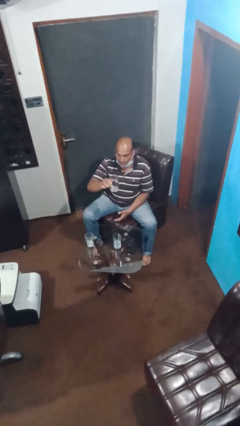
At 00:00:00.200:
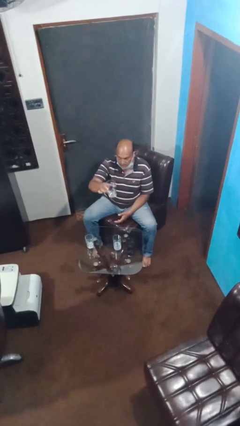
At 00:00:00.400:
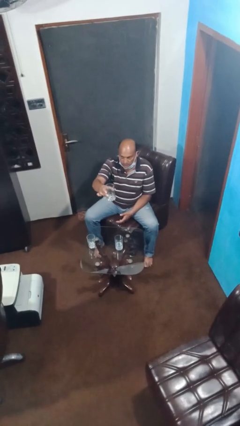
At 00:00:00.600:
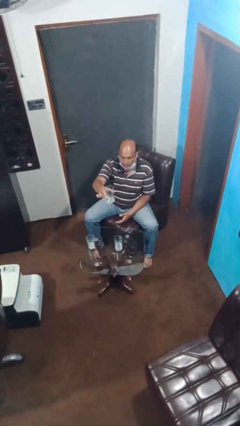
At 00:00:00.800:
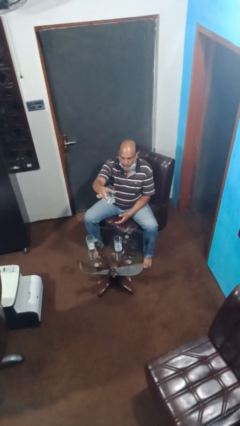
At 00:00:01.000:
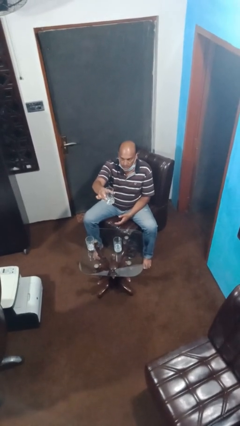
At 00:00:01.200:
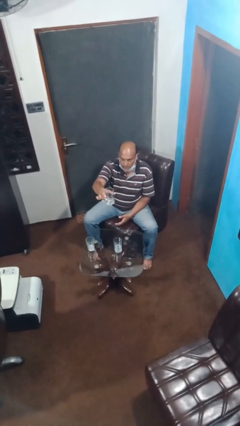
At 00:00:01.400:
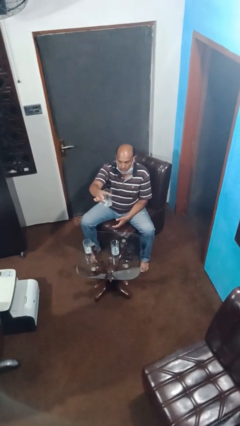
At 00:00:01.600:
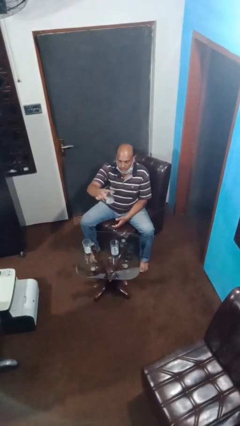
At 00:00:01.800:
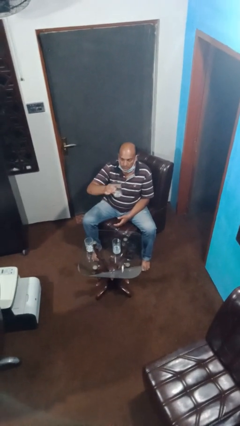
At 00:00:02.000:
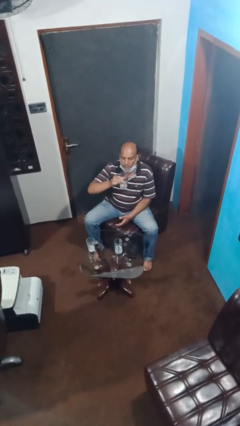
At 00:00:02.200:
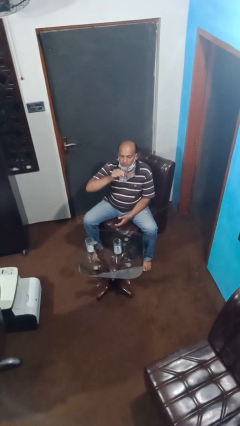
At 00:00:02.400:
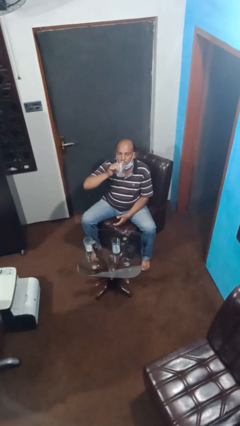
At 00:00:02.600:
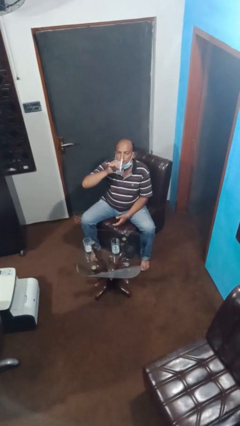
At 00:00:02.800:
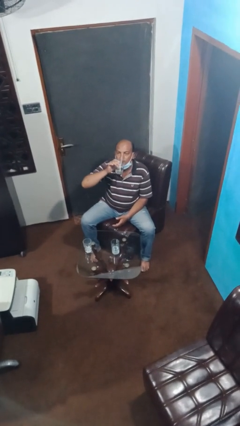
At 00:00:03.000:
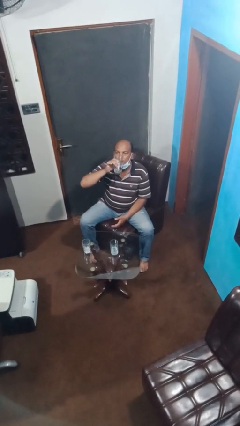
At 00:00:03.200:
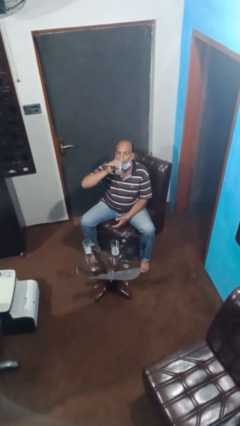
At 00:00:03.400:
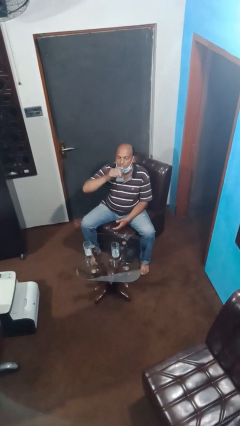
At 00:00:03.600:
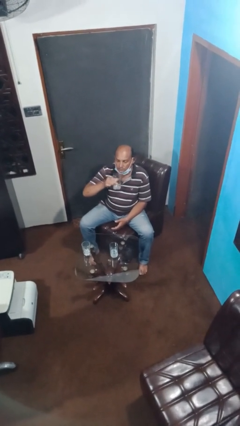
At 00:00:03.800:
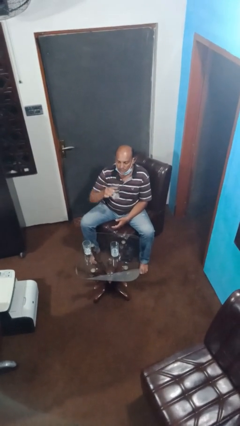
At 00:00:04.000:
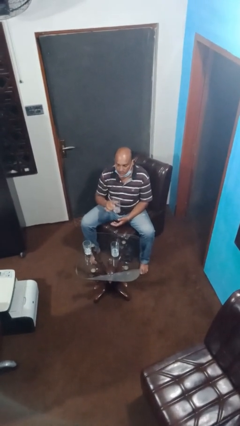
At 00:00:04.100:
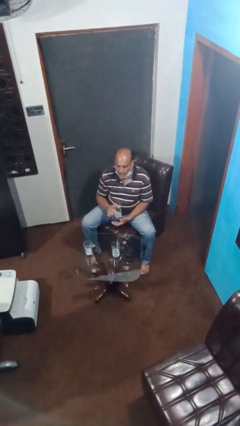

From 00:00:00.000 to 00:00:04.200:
person drinks from shotglass

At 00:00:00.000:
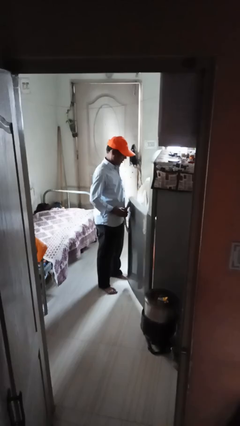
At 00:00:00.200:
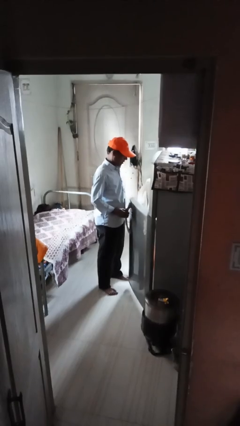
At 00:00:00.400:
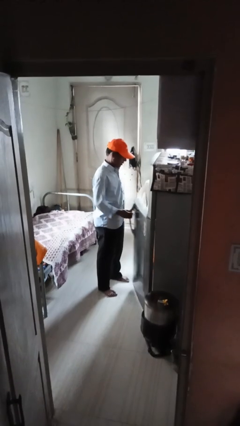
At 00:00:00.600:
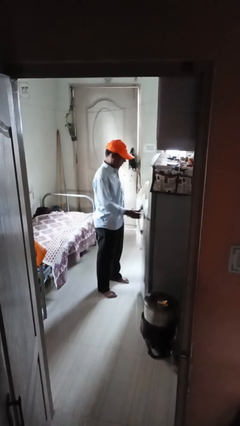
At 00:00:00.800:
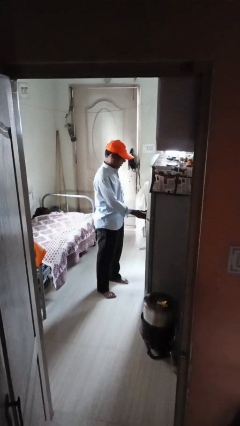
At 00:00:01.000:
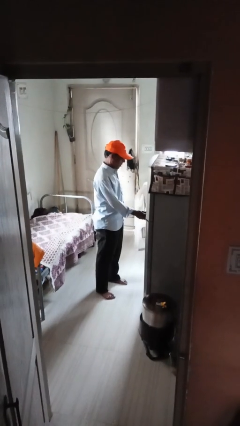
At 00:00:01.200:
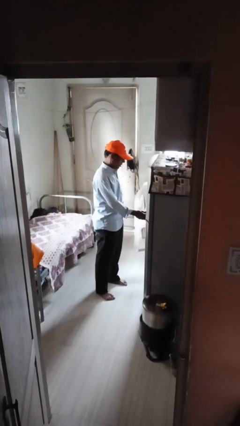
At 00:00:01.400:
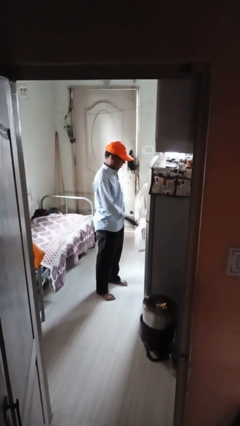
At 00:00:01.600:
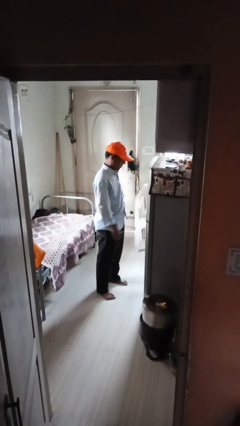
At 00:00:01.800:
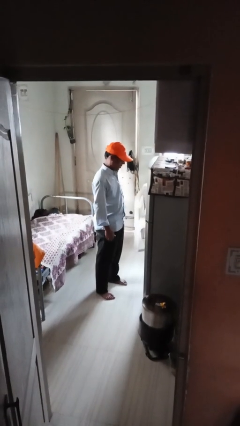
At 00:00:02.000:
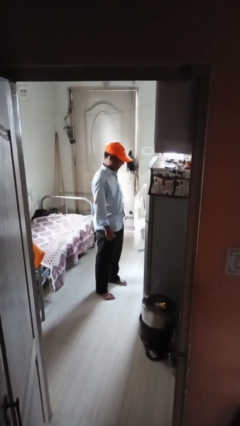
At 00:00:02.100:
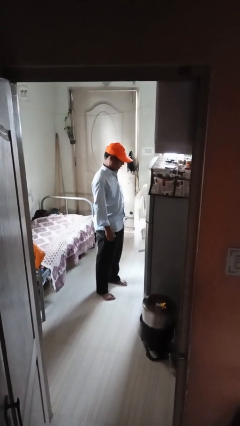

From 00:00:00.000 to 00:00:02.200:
person closes refrigerator

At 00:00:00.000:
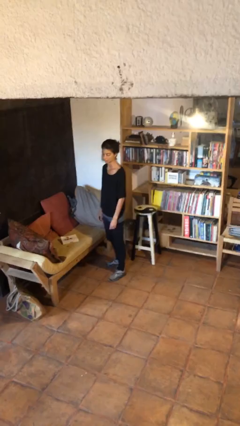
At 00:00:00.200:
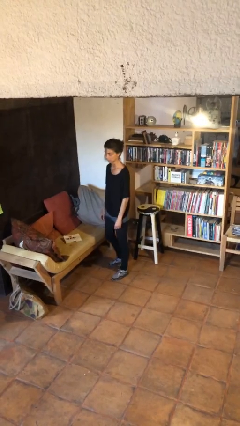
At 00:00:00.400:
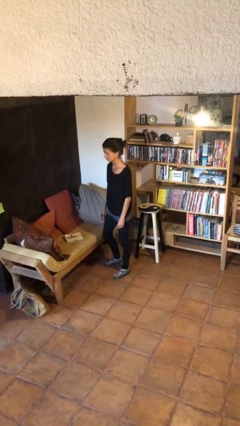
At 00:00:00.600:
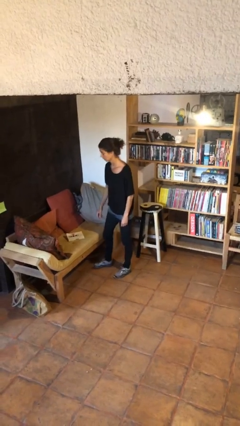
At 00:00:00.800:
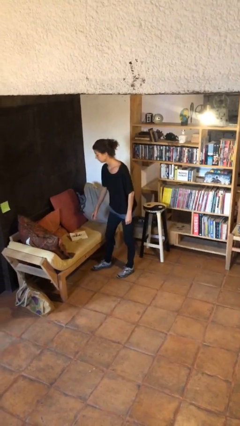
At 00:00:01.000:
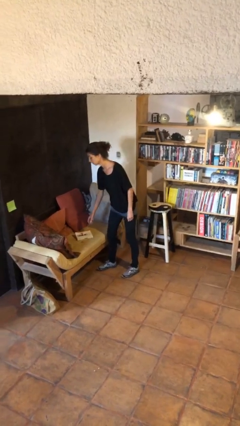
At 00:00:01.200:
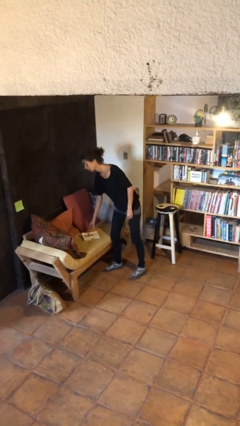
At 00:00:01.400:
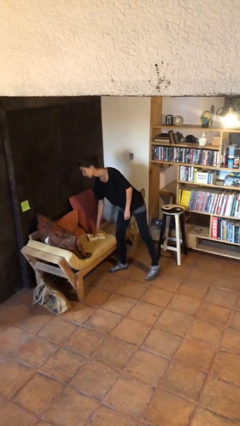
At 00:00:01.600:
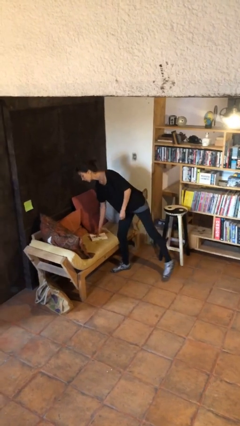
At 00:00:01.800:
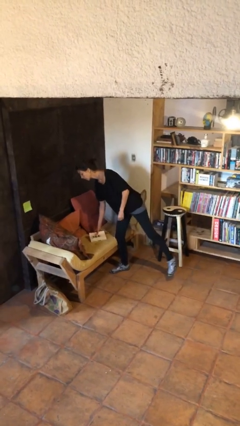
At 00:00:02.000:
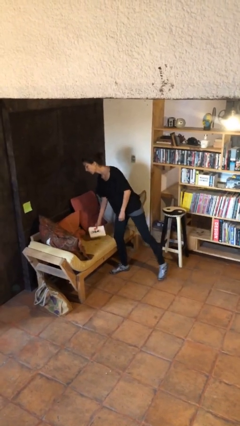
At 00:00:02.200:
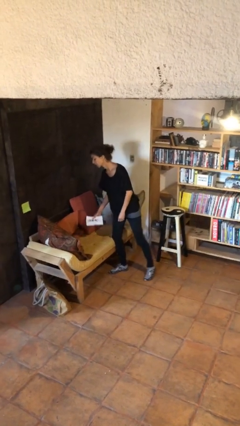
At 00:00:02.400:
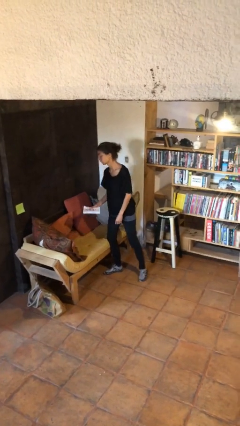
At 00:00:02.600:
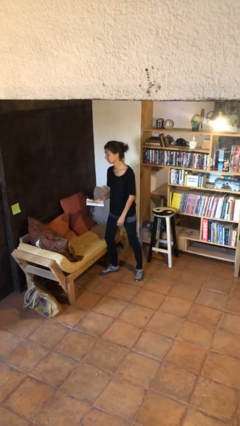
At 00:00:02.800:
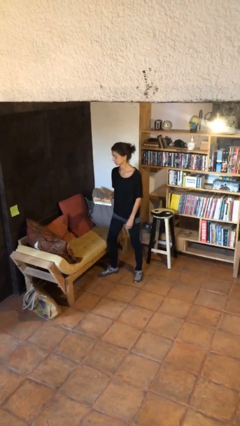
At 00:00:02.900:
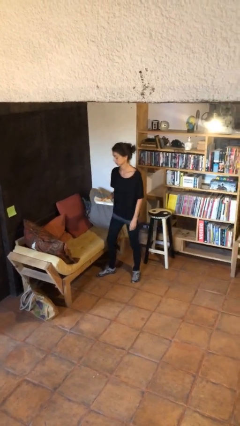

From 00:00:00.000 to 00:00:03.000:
person picks up object from couch

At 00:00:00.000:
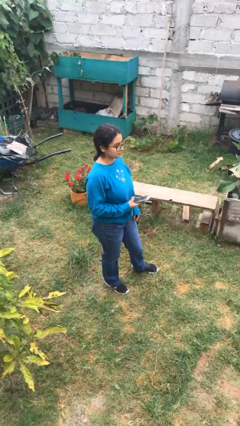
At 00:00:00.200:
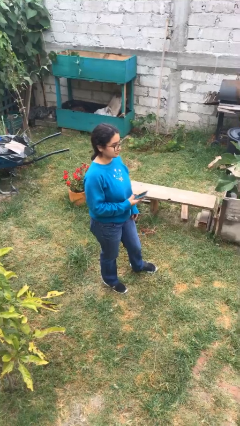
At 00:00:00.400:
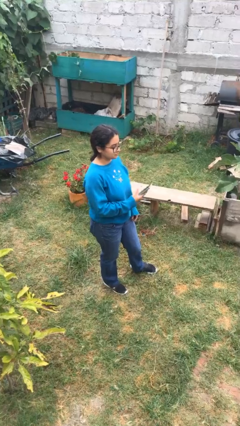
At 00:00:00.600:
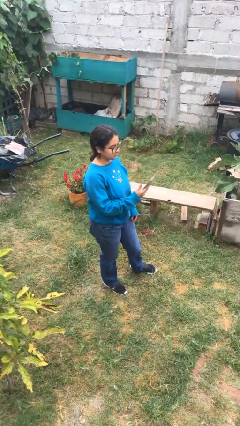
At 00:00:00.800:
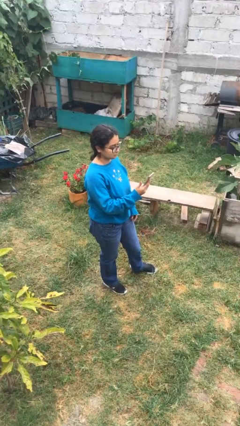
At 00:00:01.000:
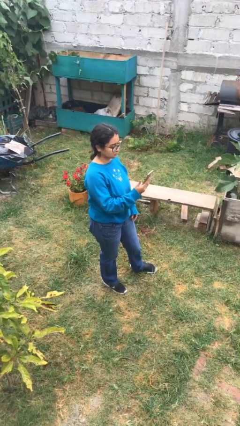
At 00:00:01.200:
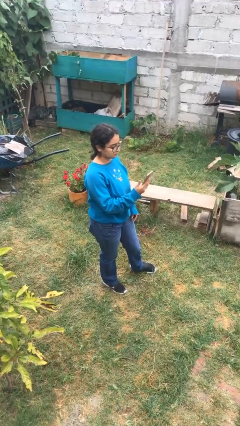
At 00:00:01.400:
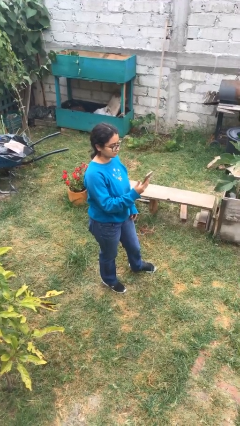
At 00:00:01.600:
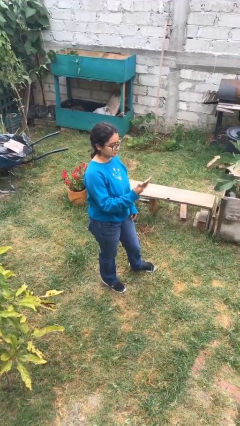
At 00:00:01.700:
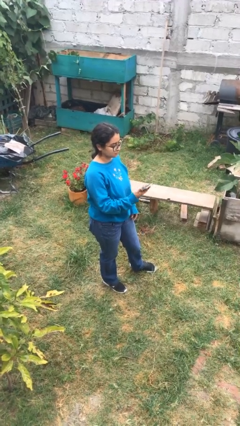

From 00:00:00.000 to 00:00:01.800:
person puts phone into pocket

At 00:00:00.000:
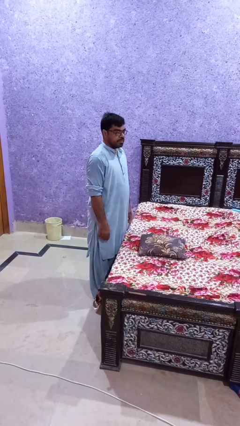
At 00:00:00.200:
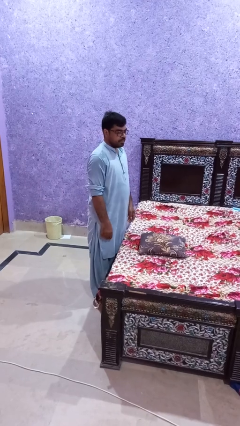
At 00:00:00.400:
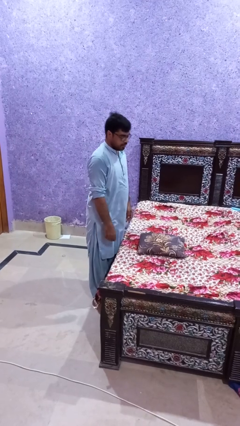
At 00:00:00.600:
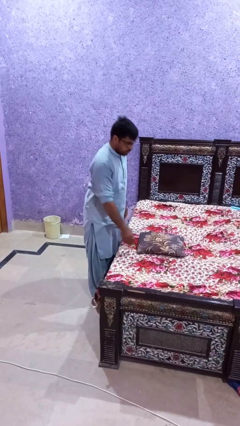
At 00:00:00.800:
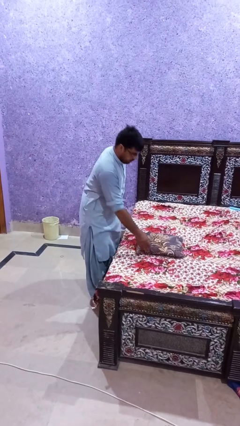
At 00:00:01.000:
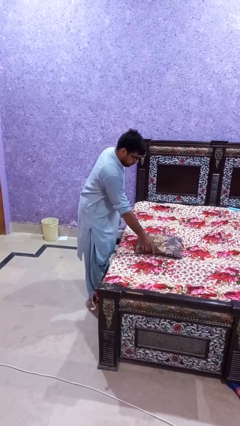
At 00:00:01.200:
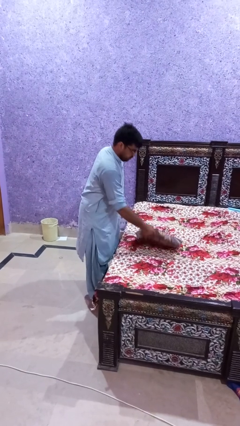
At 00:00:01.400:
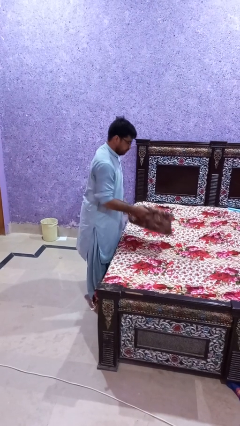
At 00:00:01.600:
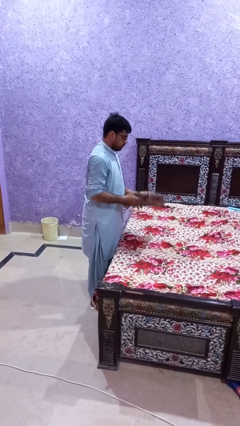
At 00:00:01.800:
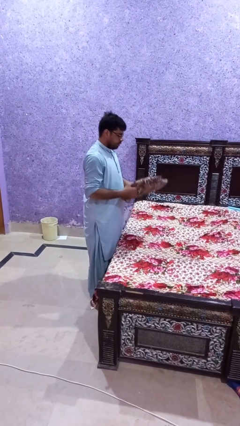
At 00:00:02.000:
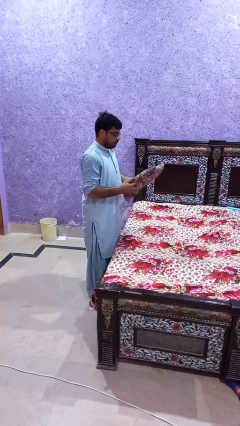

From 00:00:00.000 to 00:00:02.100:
person picks up object from bed

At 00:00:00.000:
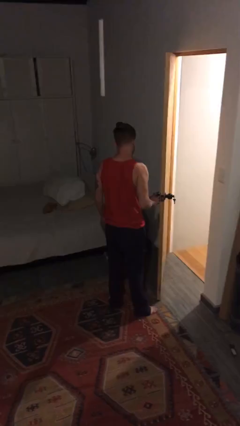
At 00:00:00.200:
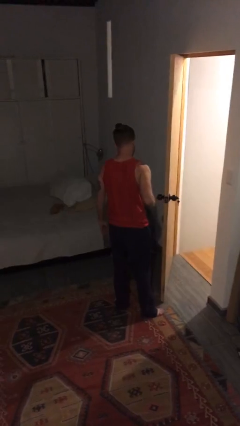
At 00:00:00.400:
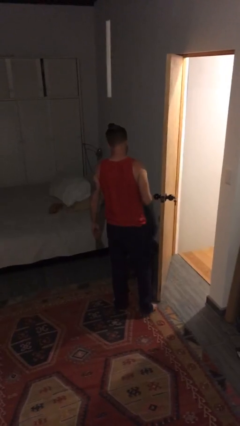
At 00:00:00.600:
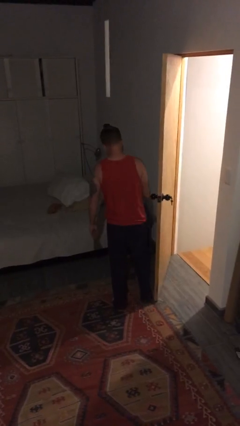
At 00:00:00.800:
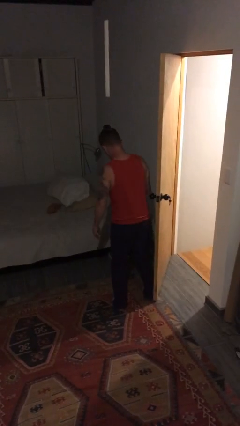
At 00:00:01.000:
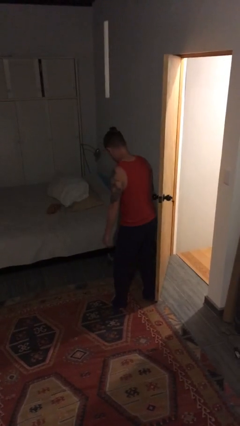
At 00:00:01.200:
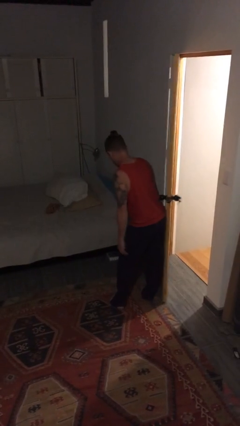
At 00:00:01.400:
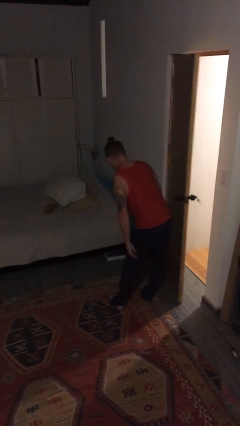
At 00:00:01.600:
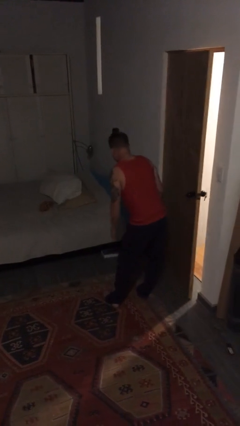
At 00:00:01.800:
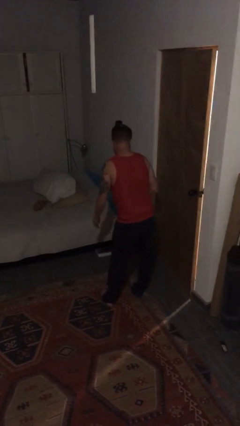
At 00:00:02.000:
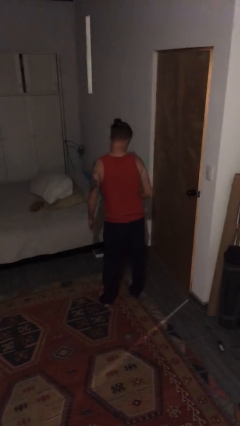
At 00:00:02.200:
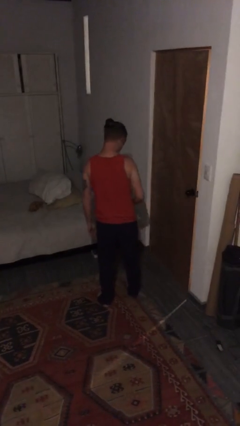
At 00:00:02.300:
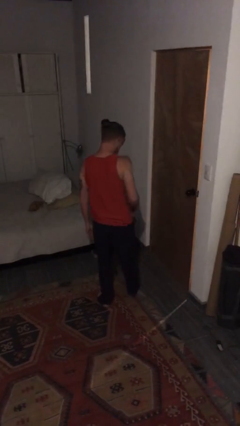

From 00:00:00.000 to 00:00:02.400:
person closes door with hip

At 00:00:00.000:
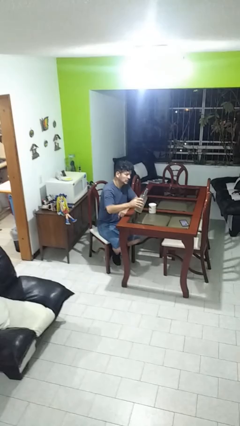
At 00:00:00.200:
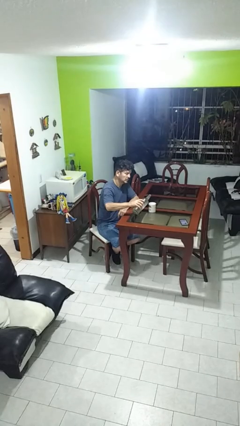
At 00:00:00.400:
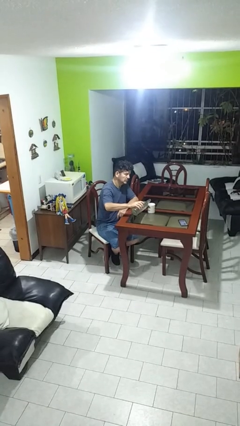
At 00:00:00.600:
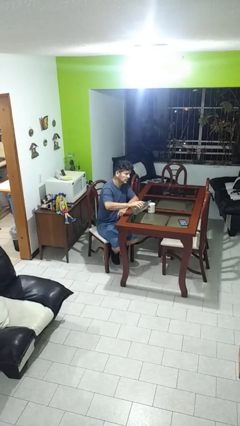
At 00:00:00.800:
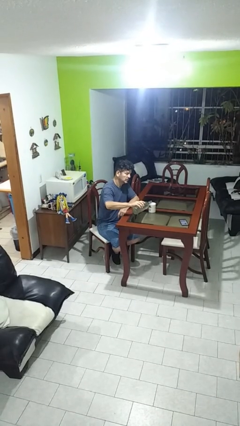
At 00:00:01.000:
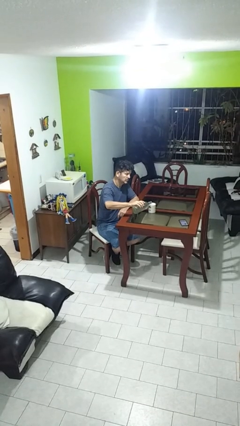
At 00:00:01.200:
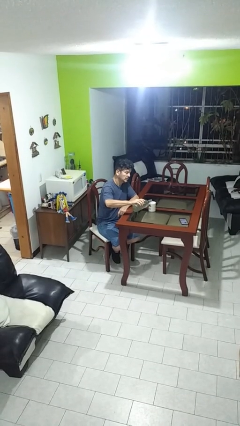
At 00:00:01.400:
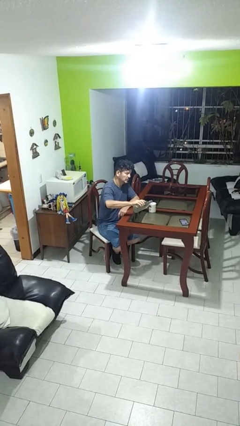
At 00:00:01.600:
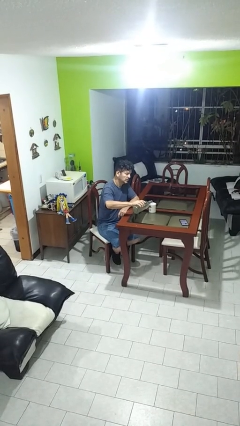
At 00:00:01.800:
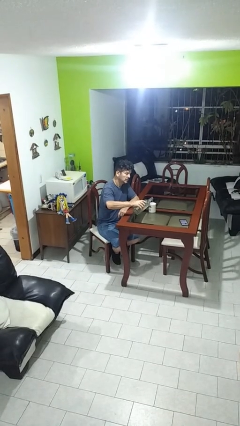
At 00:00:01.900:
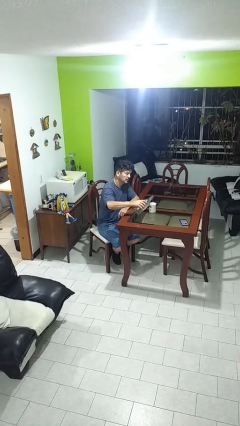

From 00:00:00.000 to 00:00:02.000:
person pours liquid into cup
